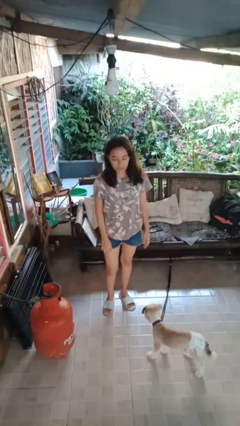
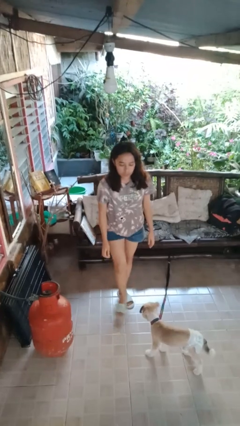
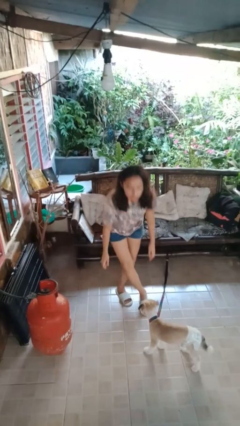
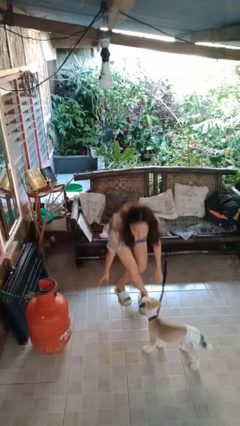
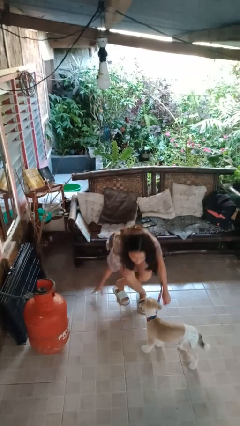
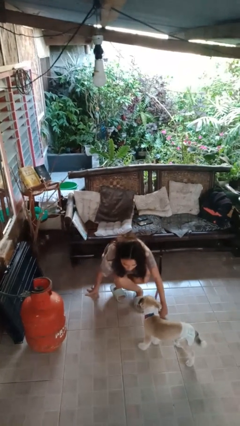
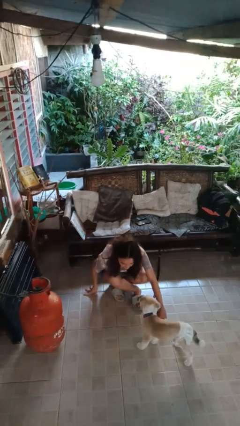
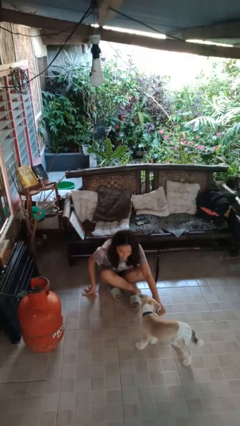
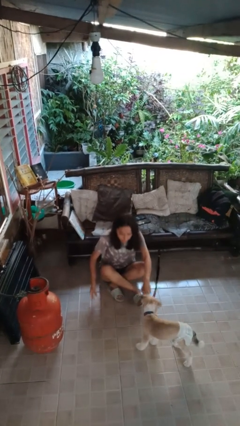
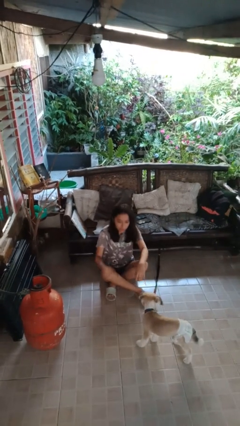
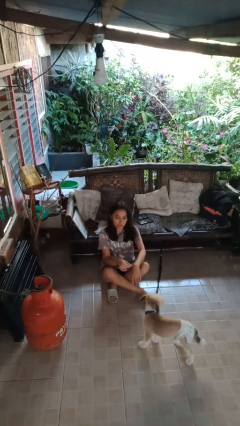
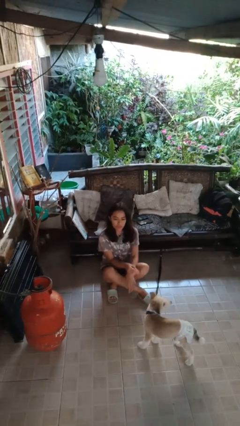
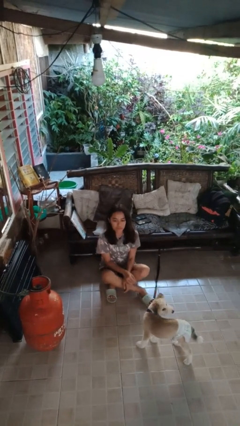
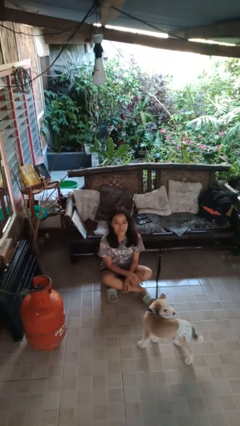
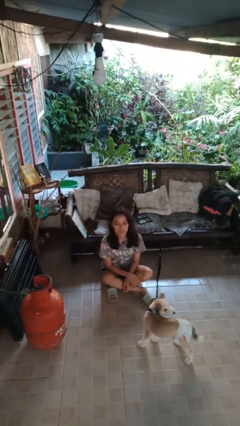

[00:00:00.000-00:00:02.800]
person sits crisscross

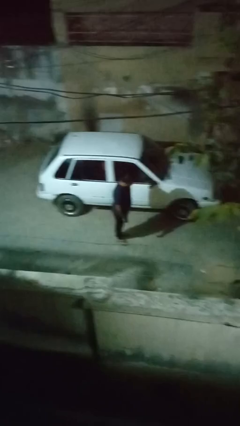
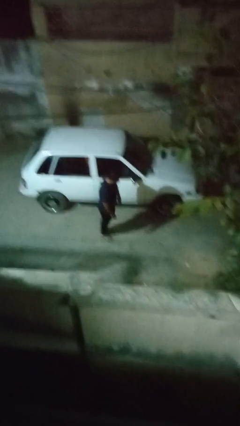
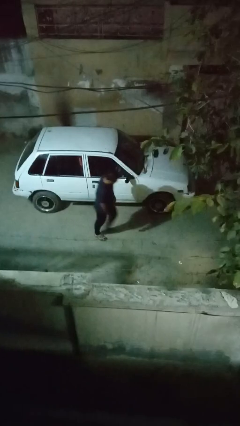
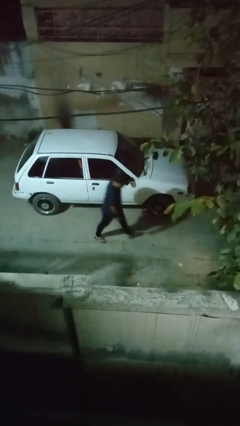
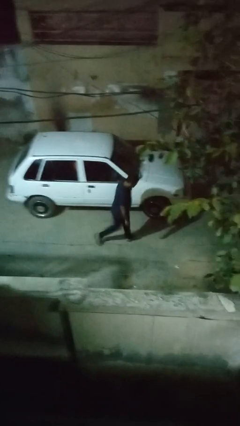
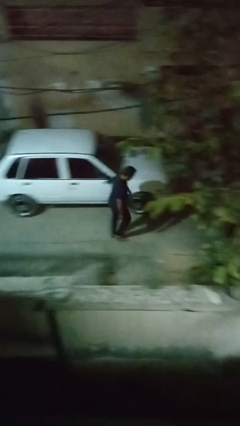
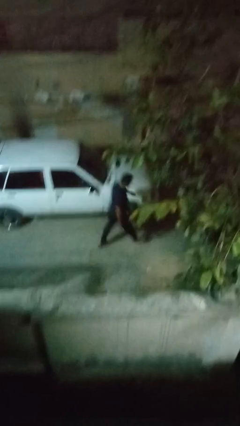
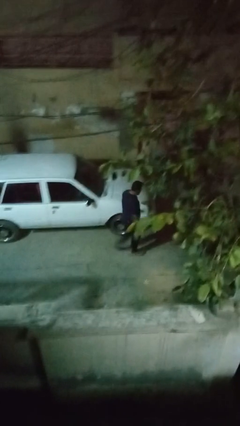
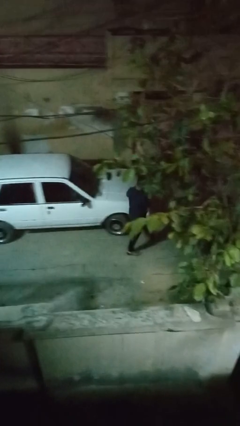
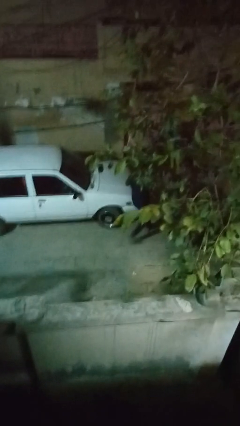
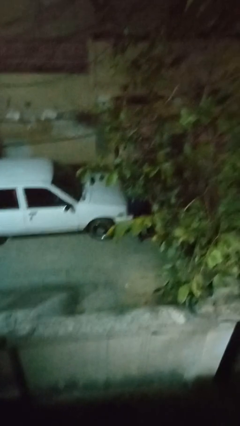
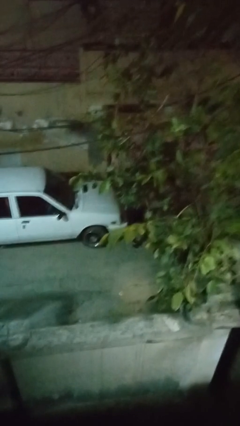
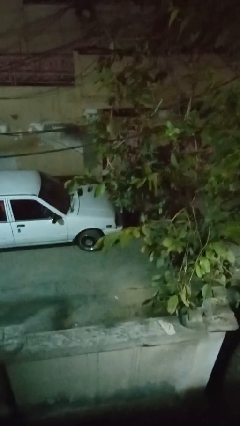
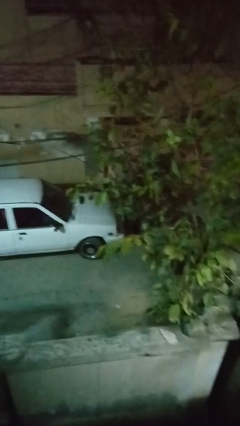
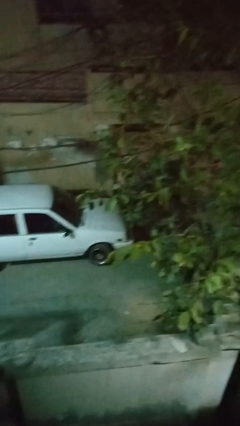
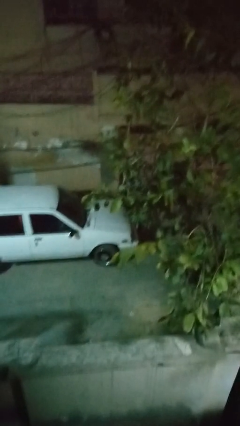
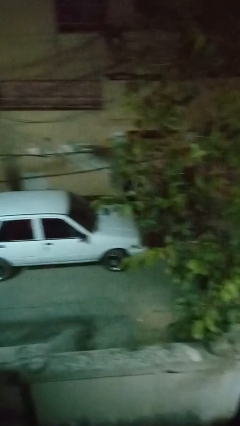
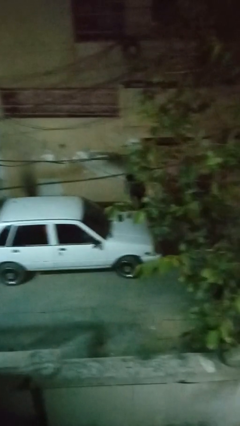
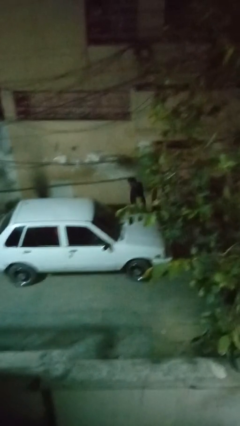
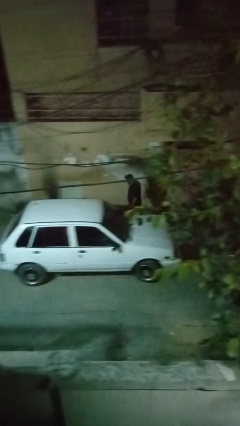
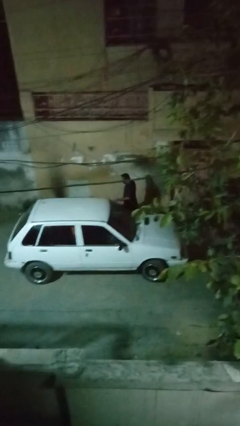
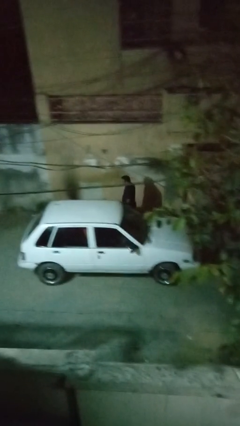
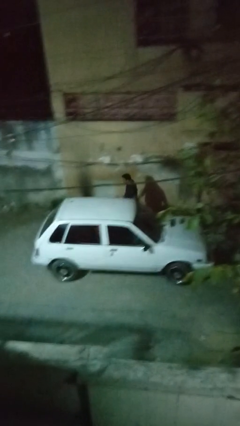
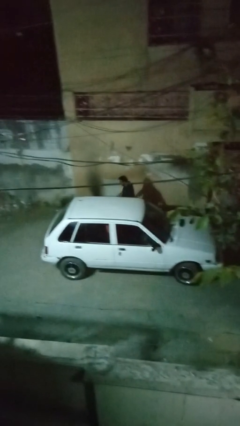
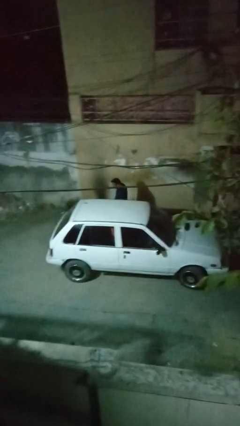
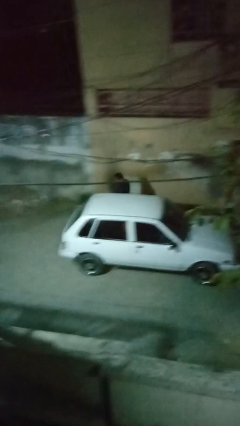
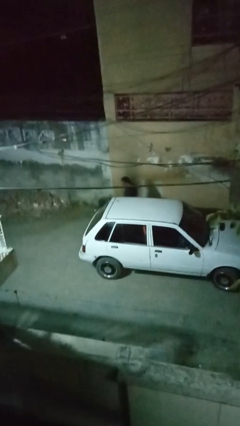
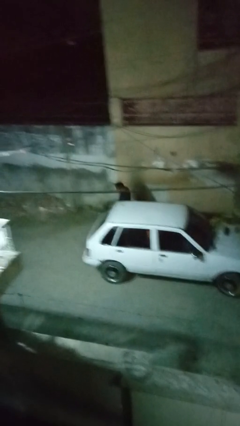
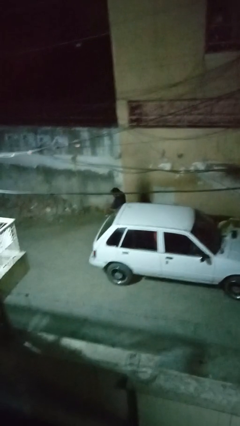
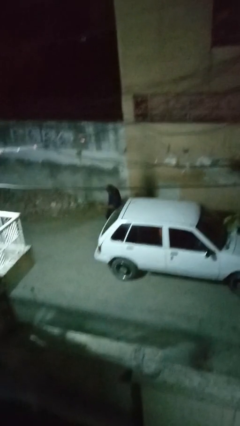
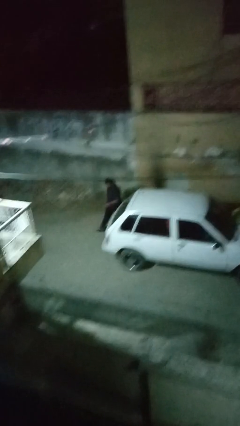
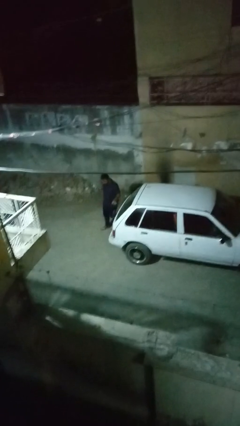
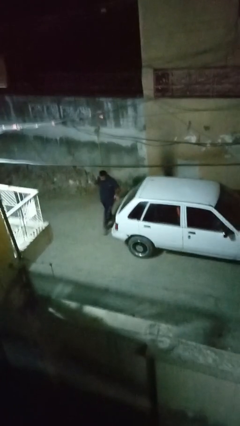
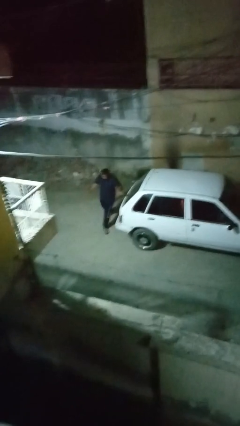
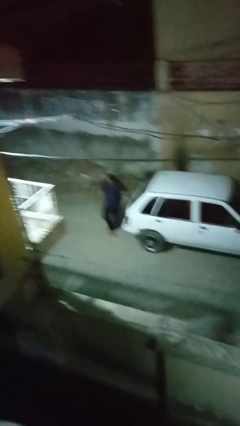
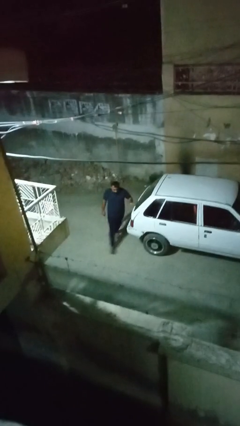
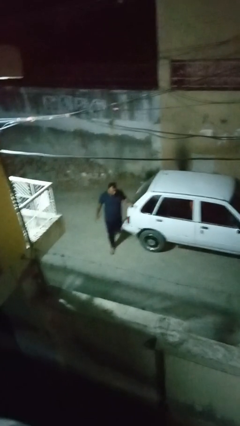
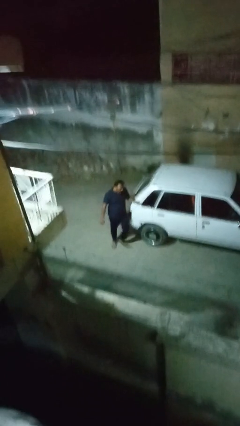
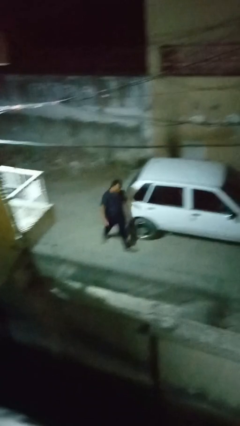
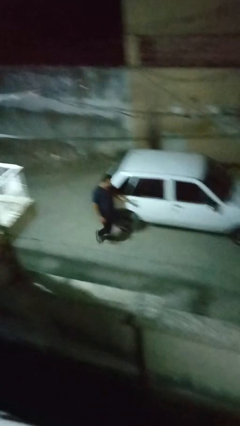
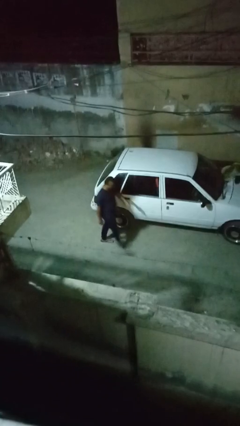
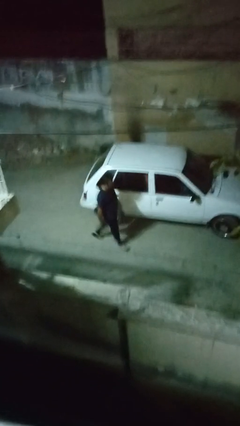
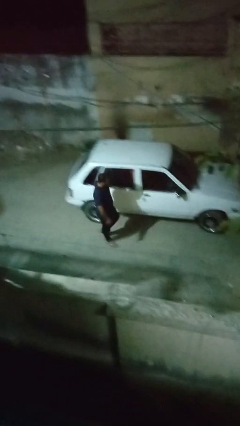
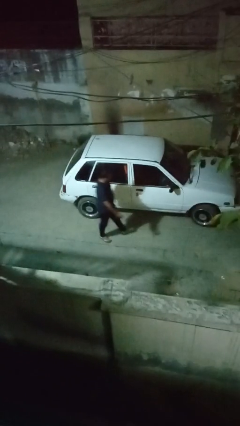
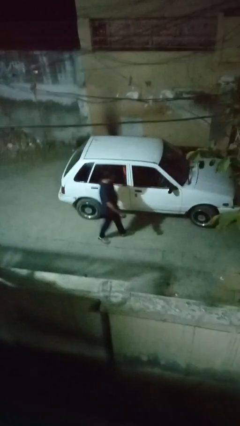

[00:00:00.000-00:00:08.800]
person walks around car

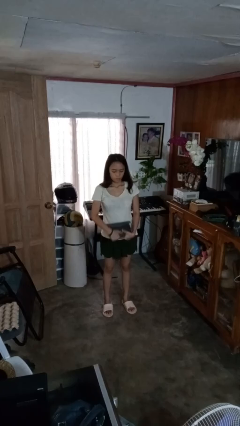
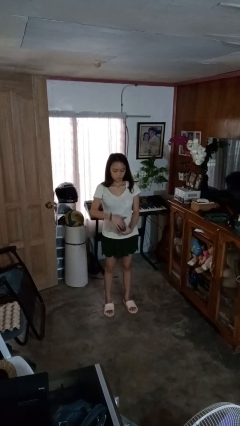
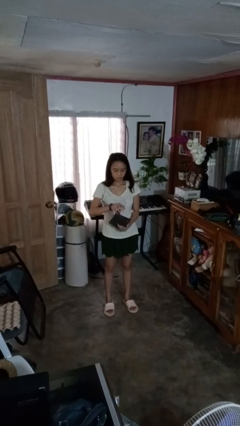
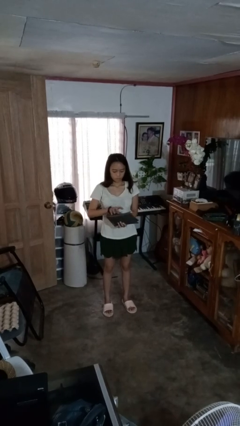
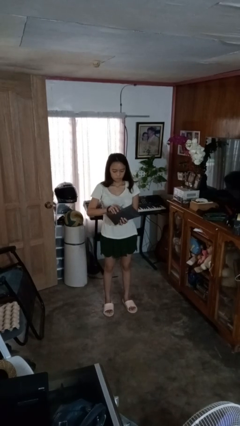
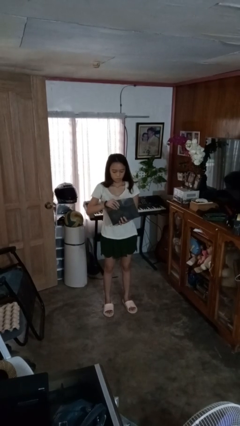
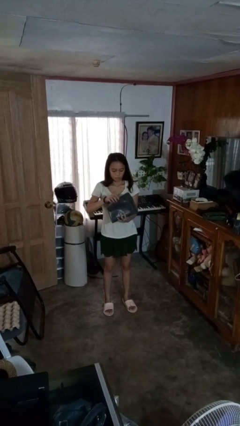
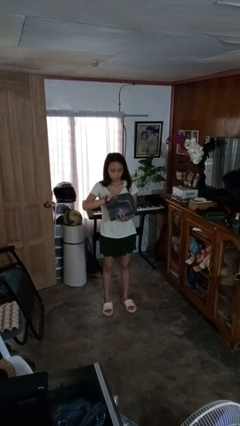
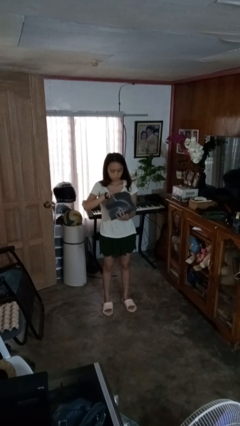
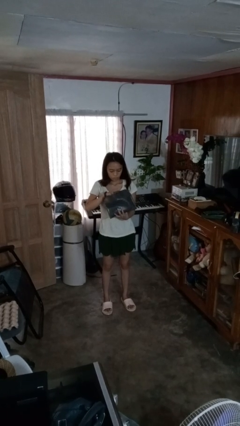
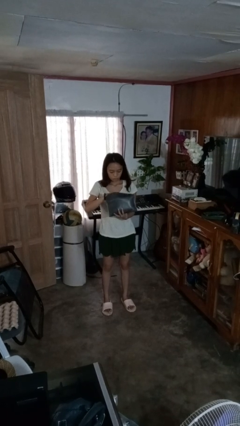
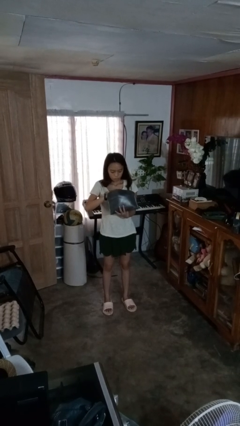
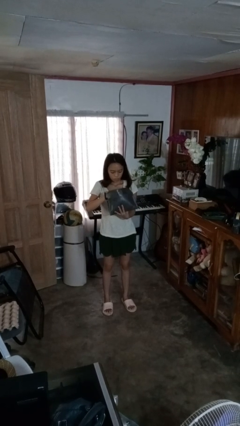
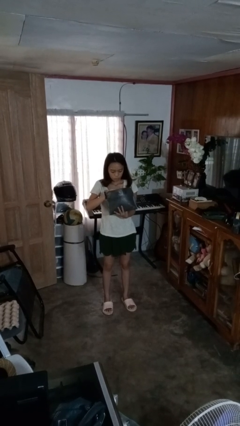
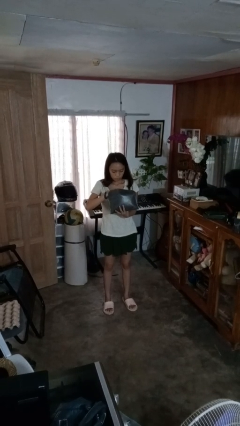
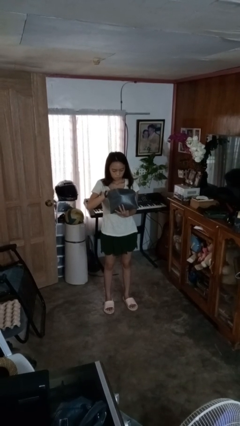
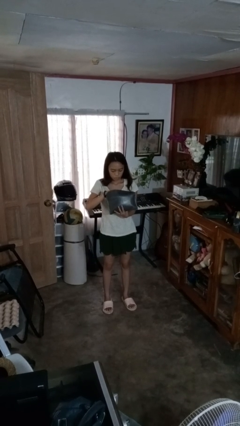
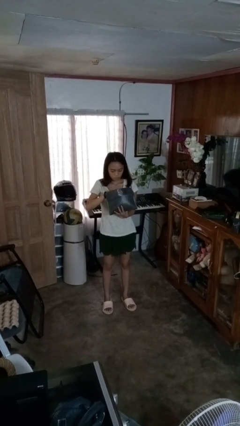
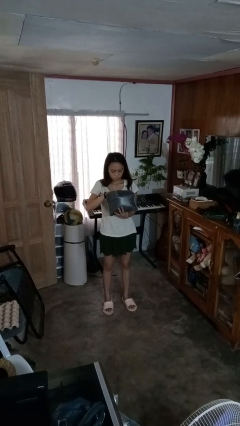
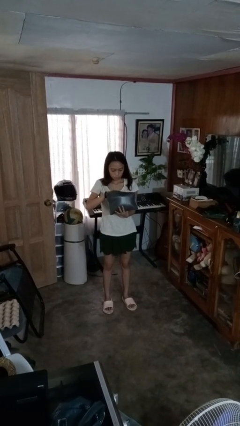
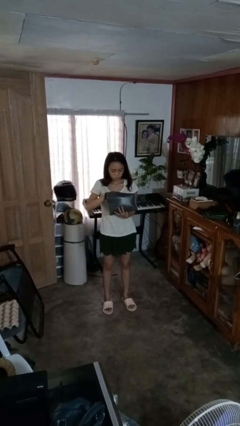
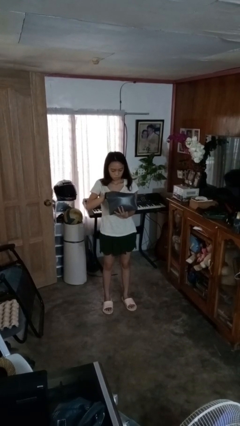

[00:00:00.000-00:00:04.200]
person searches in purse

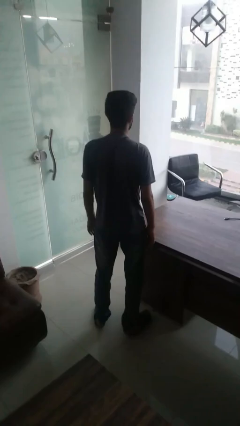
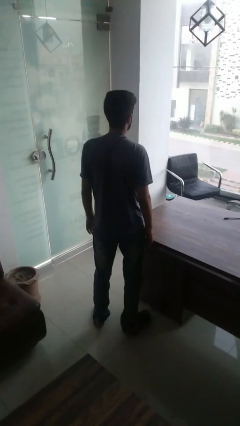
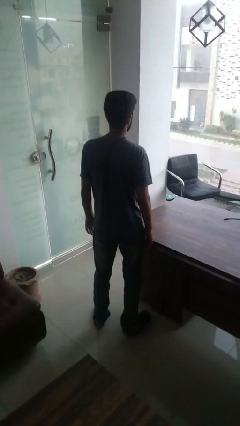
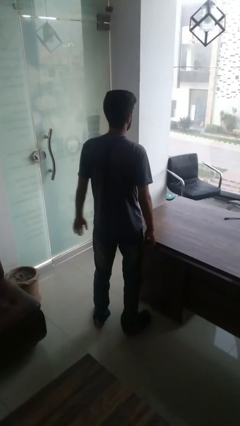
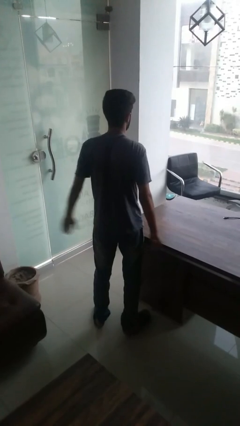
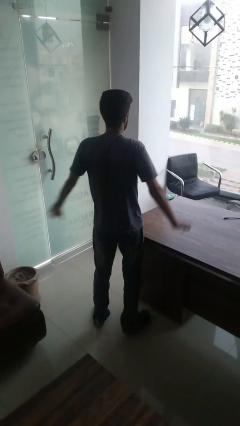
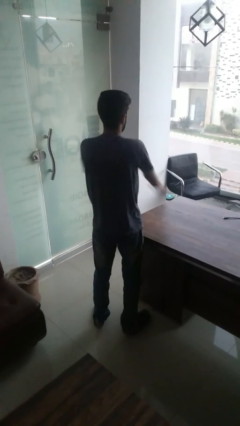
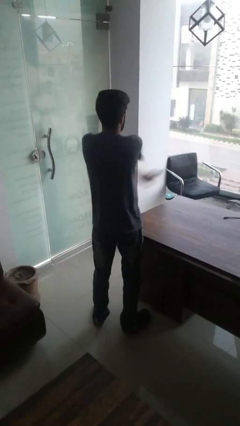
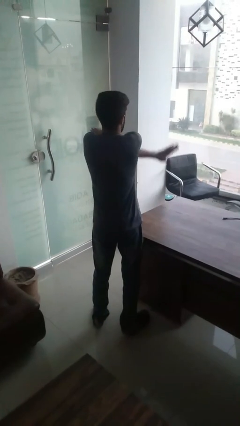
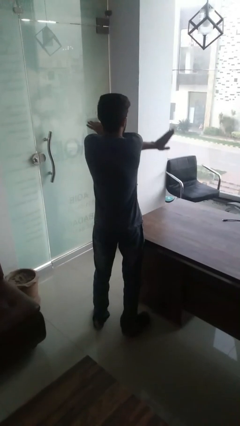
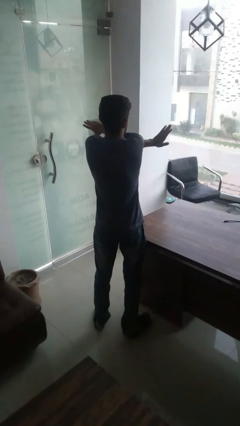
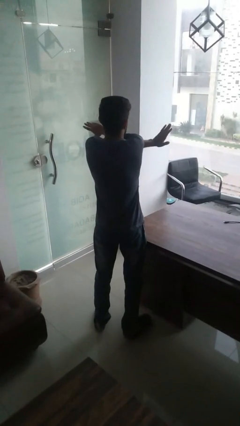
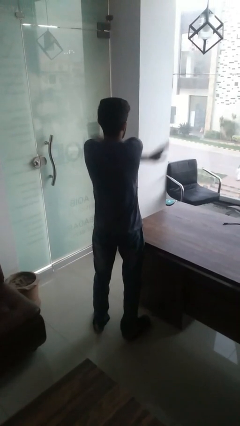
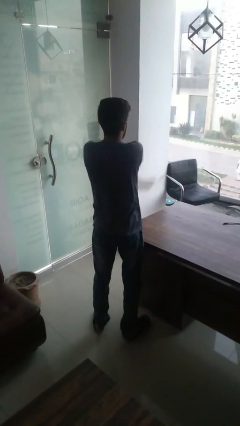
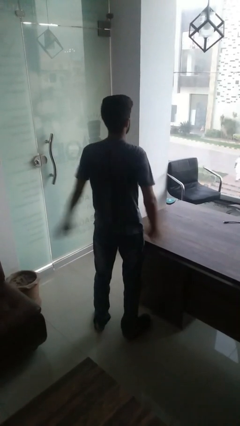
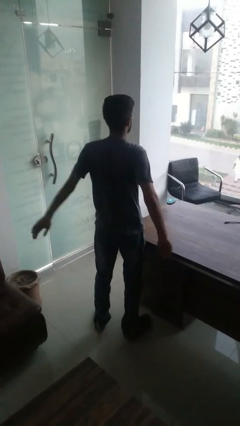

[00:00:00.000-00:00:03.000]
person gestures arms x
